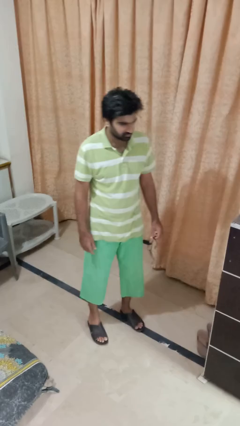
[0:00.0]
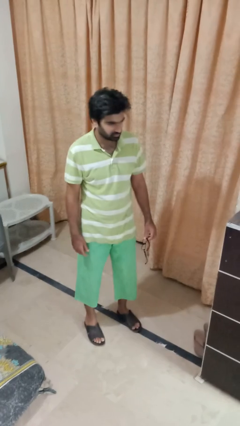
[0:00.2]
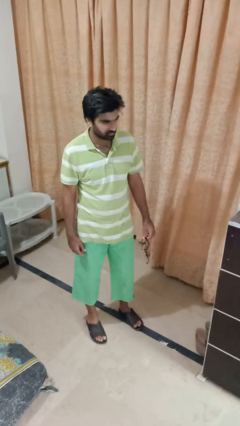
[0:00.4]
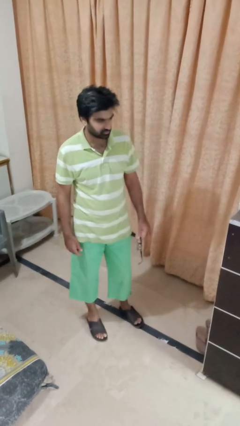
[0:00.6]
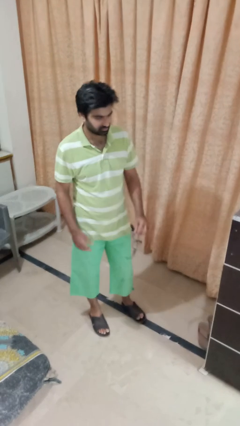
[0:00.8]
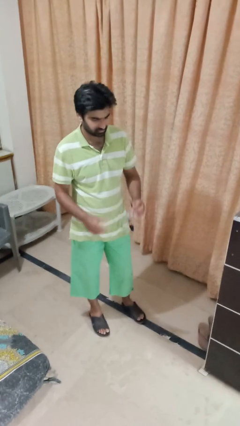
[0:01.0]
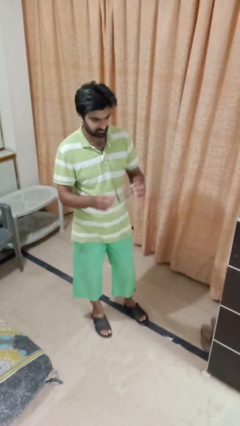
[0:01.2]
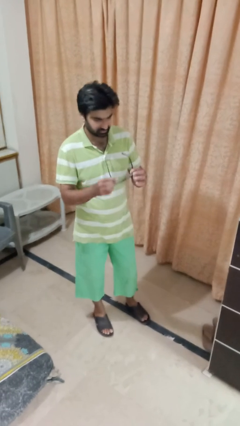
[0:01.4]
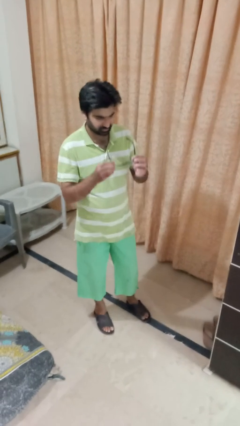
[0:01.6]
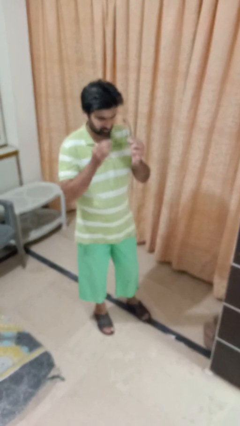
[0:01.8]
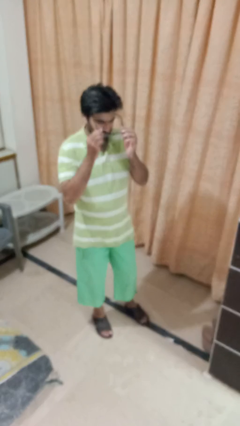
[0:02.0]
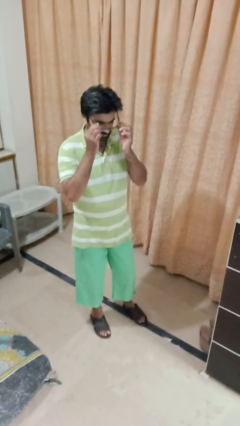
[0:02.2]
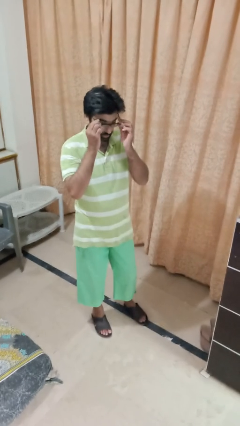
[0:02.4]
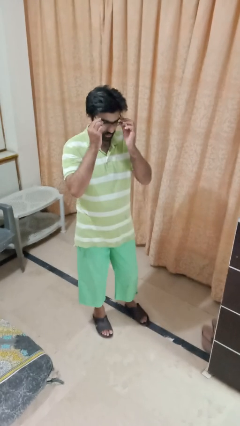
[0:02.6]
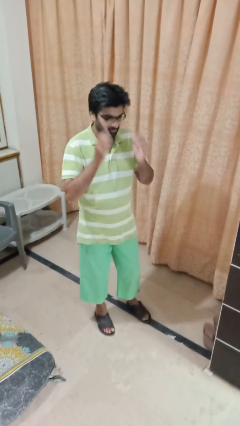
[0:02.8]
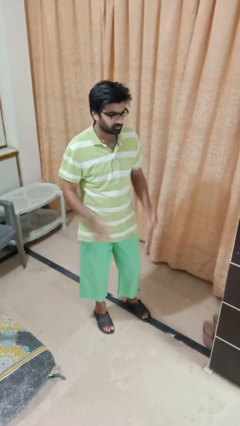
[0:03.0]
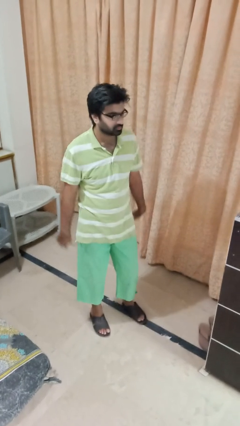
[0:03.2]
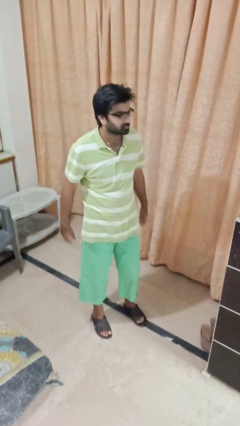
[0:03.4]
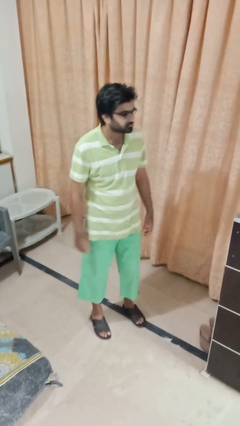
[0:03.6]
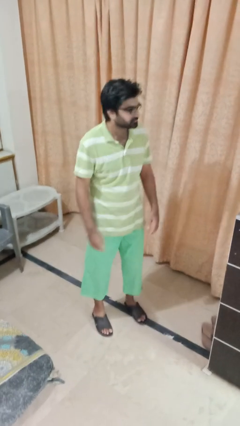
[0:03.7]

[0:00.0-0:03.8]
person puts on glasses

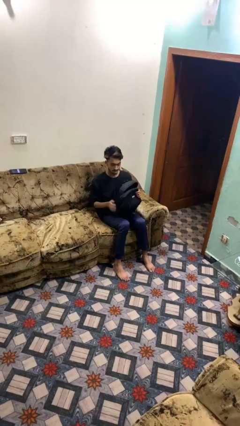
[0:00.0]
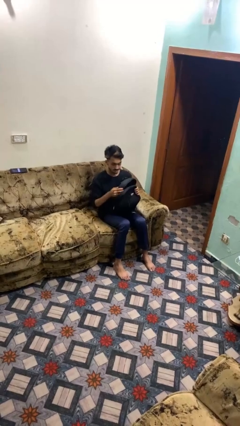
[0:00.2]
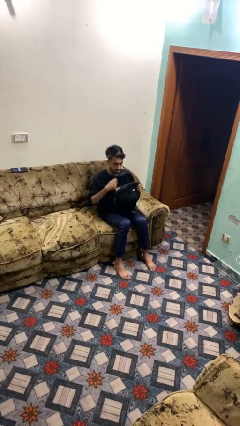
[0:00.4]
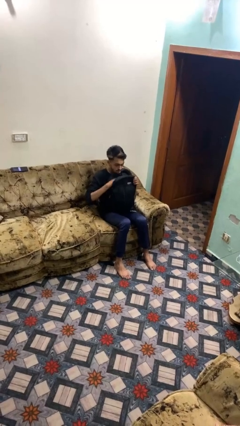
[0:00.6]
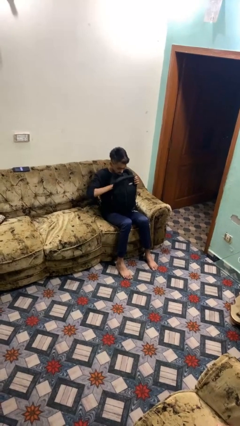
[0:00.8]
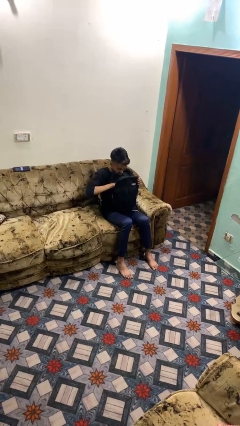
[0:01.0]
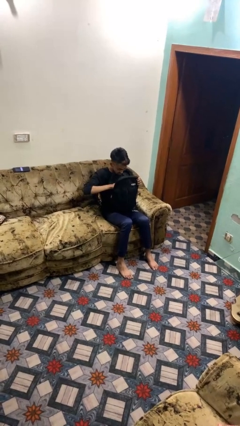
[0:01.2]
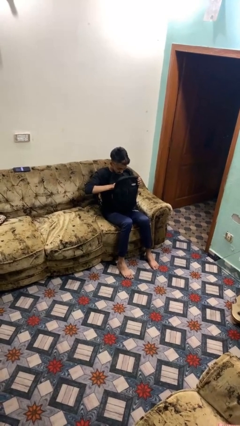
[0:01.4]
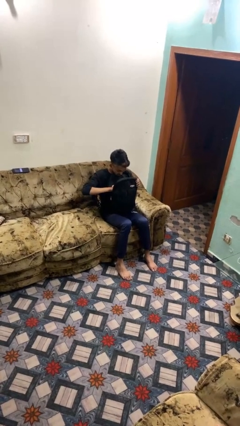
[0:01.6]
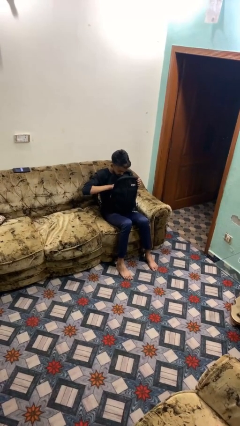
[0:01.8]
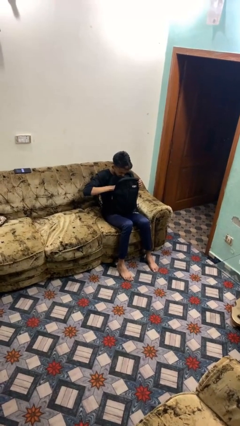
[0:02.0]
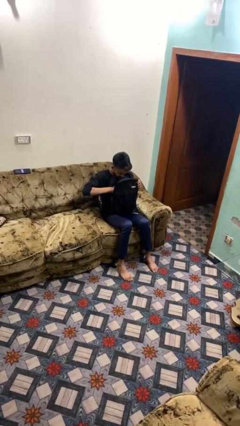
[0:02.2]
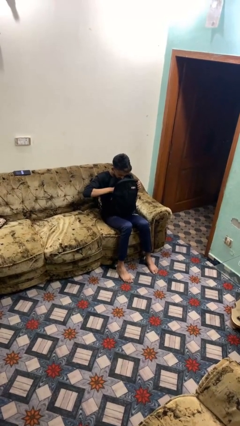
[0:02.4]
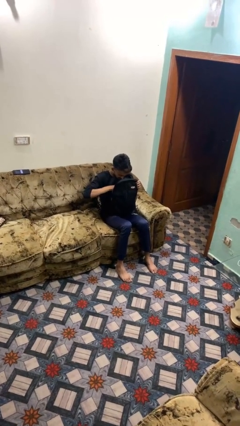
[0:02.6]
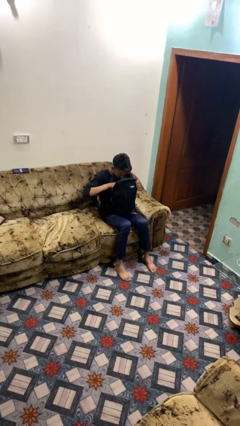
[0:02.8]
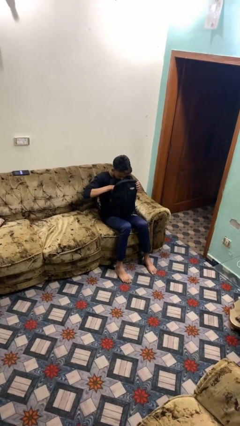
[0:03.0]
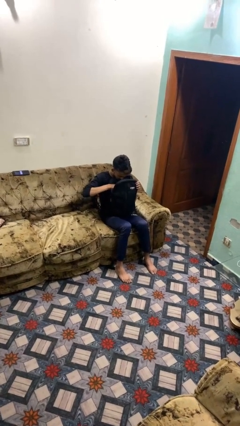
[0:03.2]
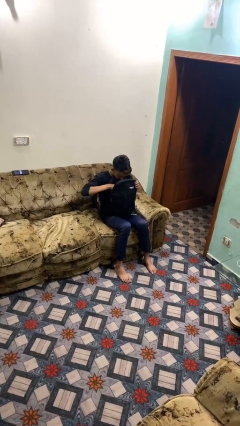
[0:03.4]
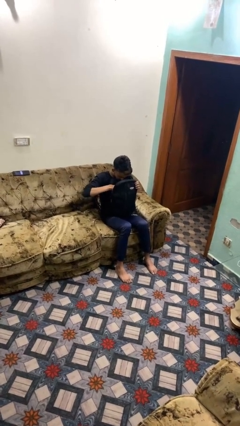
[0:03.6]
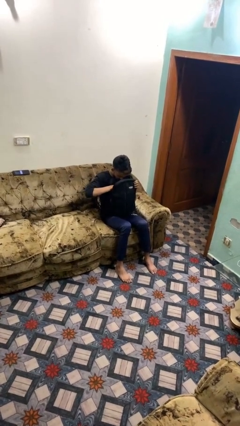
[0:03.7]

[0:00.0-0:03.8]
person searches in backpack

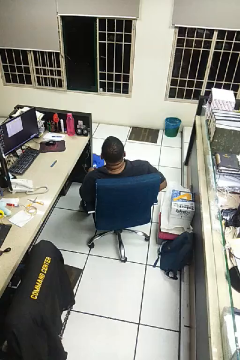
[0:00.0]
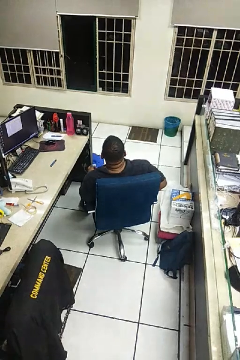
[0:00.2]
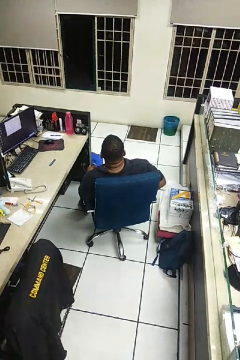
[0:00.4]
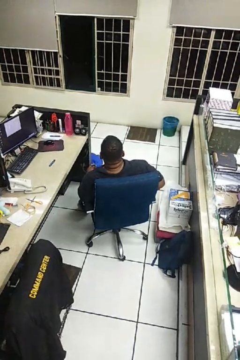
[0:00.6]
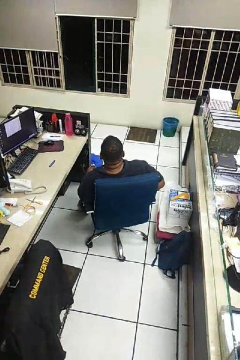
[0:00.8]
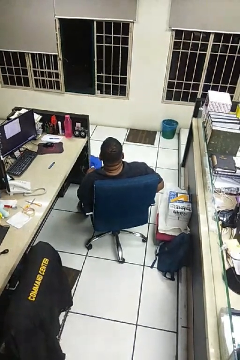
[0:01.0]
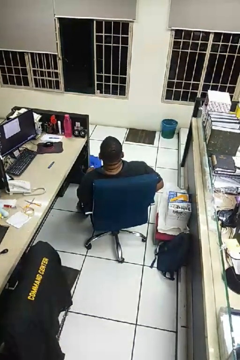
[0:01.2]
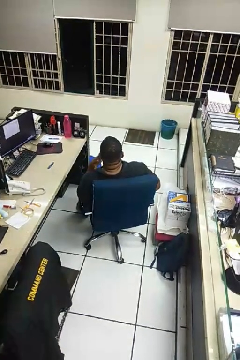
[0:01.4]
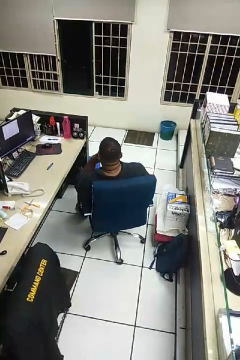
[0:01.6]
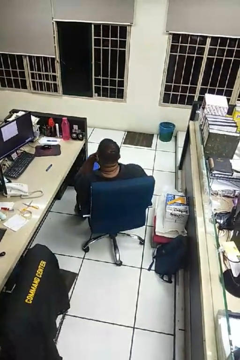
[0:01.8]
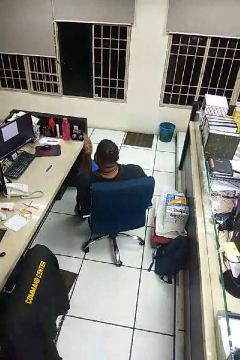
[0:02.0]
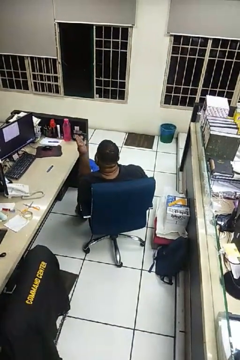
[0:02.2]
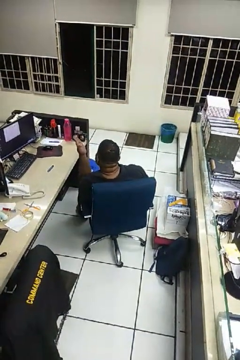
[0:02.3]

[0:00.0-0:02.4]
person gestures blow kiss

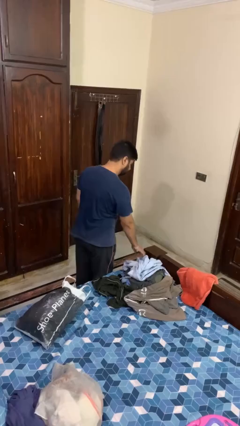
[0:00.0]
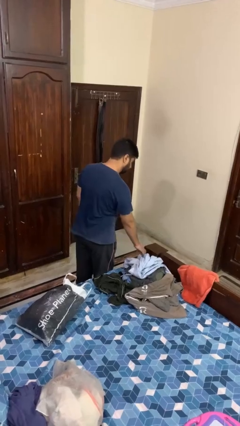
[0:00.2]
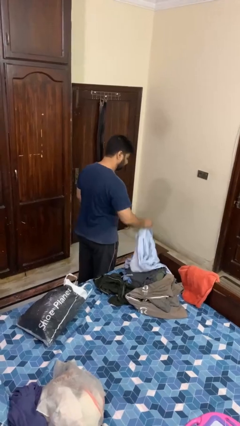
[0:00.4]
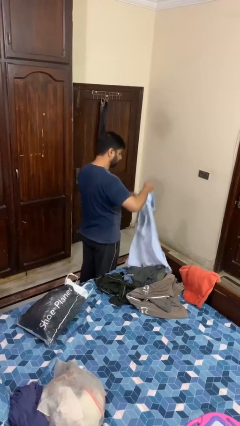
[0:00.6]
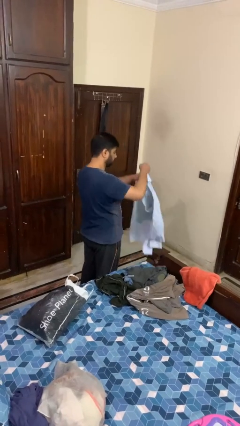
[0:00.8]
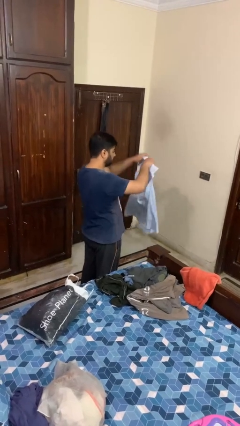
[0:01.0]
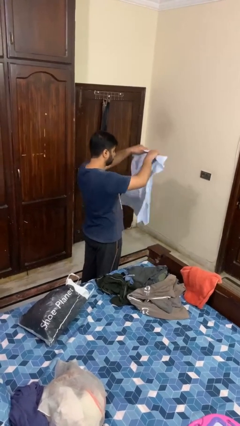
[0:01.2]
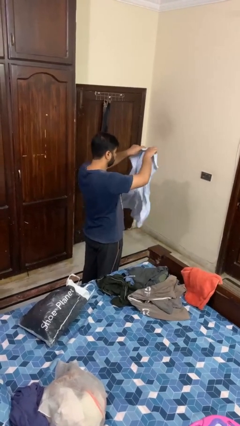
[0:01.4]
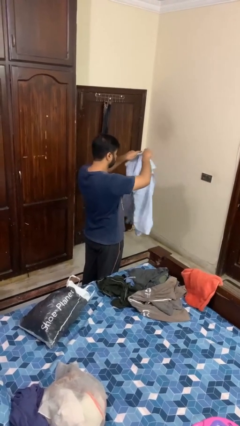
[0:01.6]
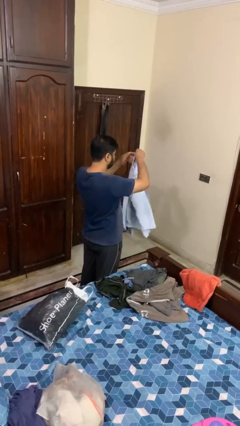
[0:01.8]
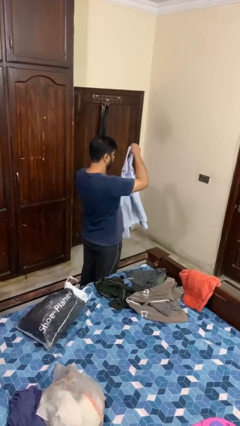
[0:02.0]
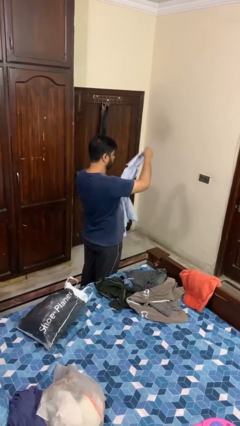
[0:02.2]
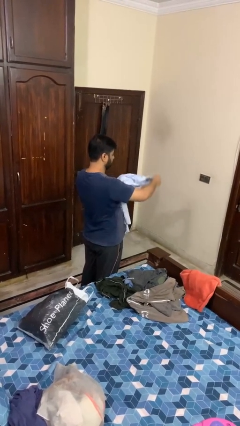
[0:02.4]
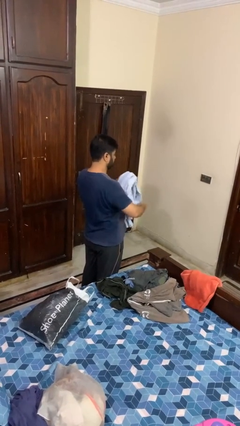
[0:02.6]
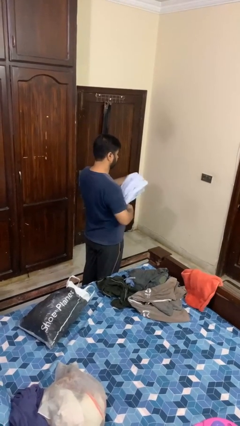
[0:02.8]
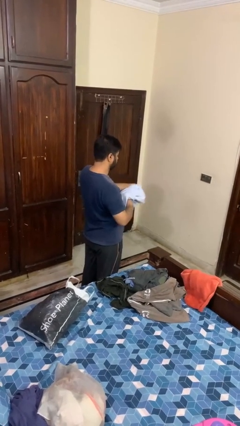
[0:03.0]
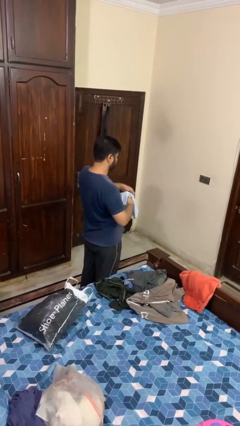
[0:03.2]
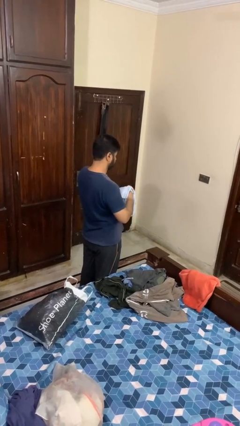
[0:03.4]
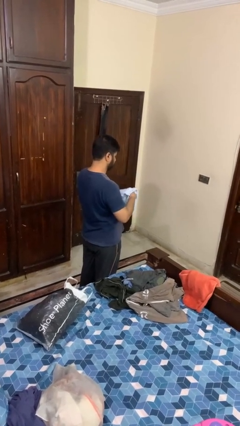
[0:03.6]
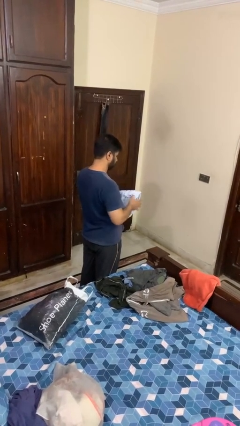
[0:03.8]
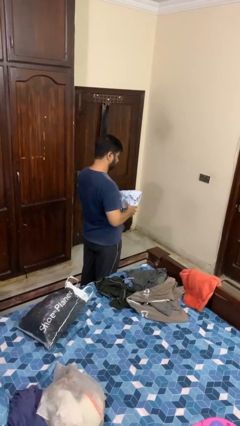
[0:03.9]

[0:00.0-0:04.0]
person folds shirt

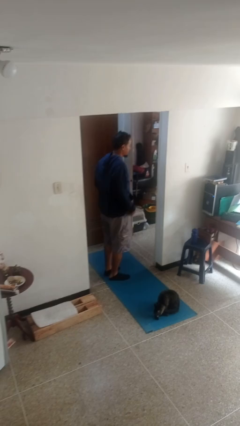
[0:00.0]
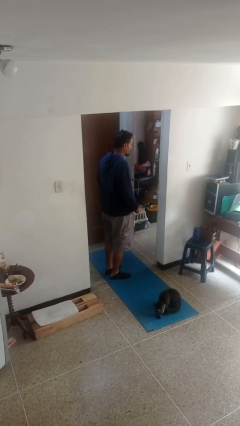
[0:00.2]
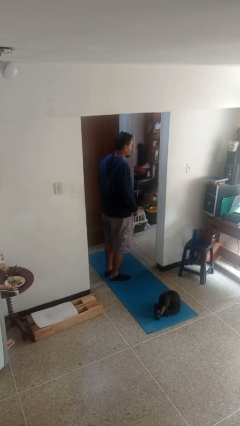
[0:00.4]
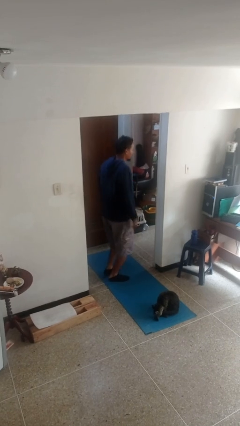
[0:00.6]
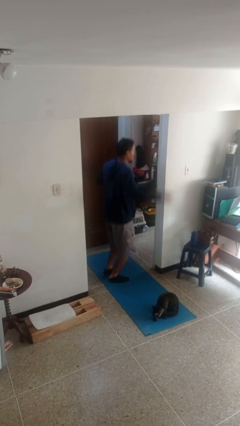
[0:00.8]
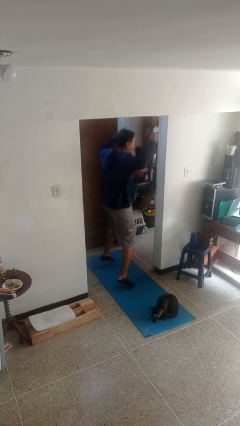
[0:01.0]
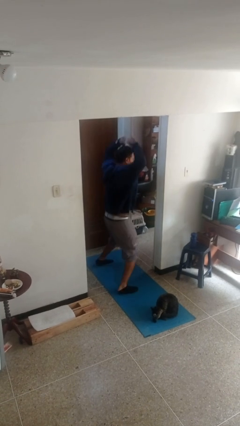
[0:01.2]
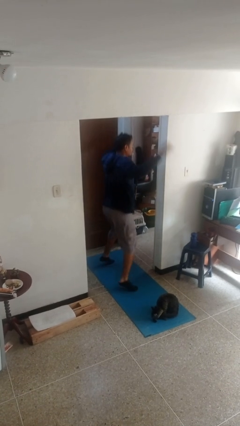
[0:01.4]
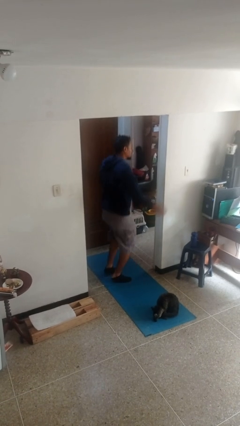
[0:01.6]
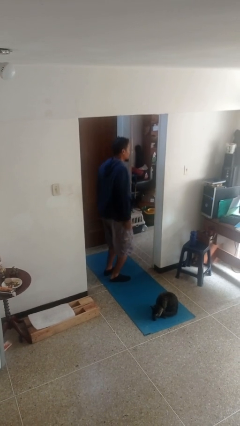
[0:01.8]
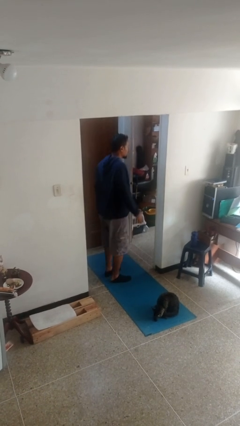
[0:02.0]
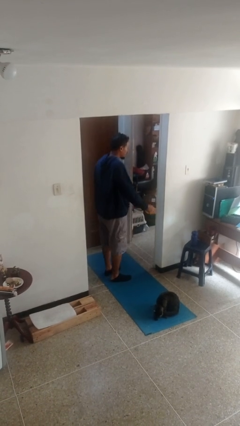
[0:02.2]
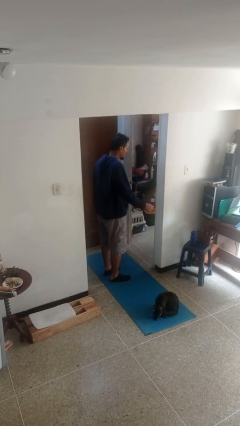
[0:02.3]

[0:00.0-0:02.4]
person exercises with jumping jacks

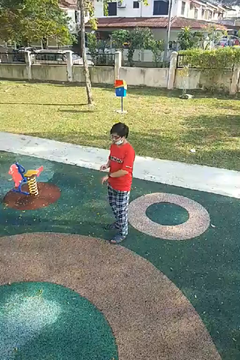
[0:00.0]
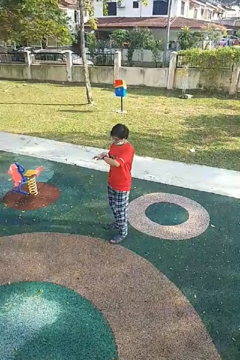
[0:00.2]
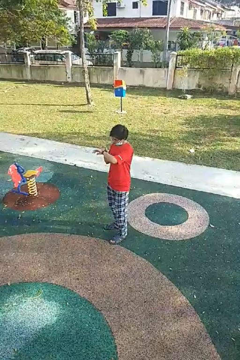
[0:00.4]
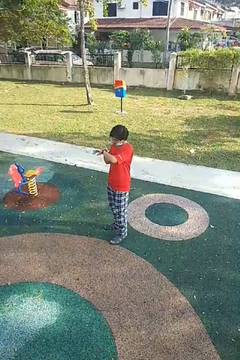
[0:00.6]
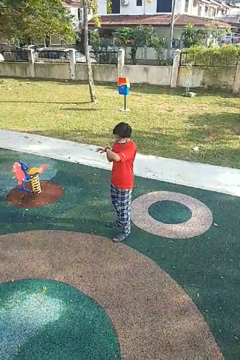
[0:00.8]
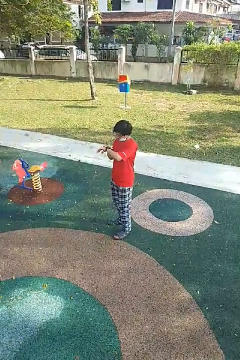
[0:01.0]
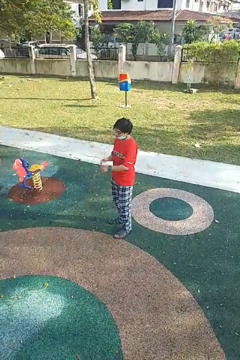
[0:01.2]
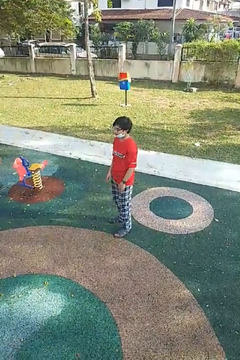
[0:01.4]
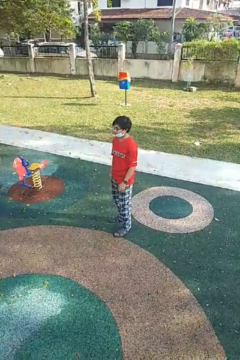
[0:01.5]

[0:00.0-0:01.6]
person looks at wristwatch
